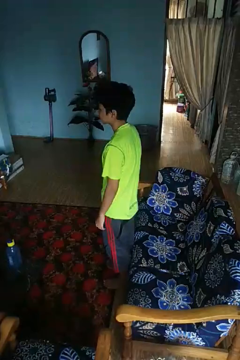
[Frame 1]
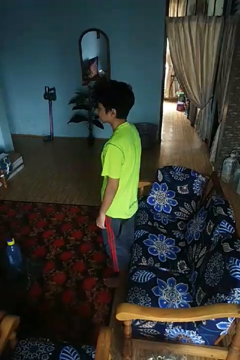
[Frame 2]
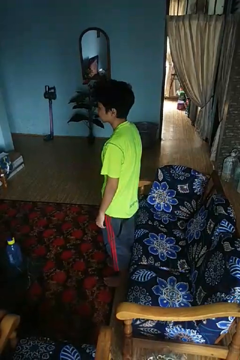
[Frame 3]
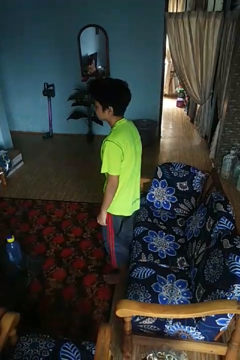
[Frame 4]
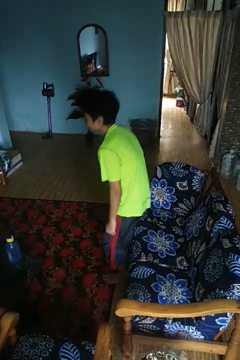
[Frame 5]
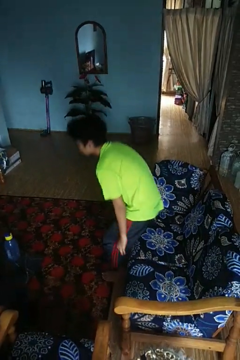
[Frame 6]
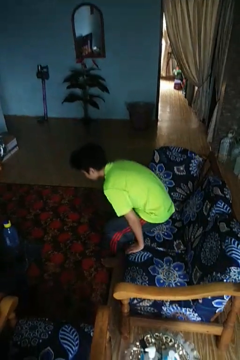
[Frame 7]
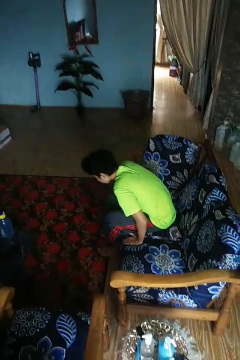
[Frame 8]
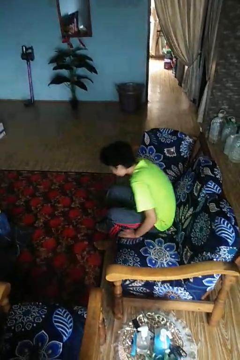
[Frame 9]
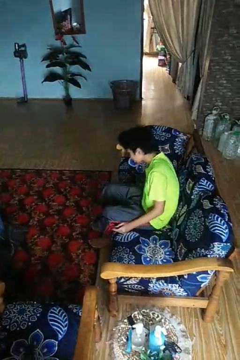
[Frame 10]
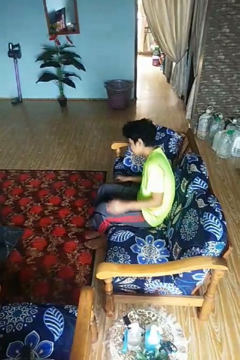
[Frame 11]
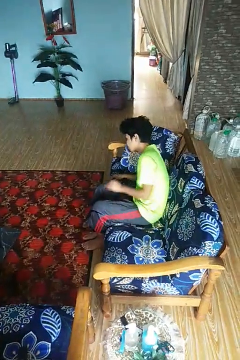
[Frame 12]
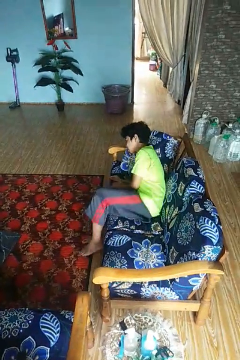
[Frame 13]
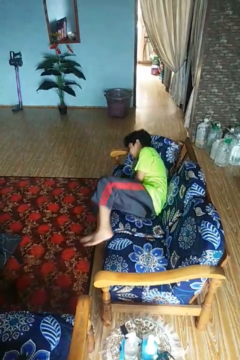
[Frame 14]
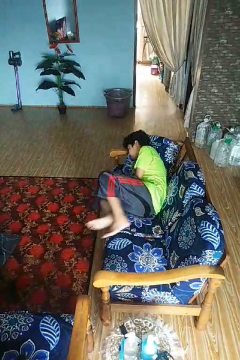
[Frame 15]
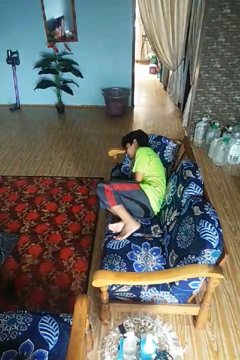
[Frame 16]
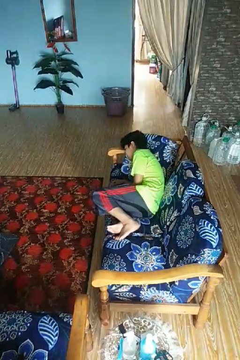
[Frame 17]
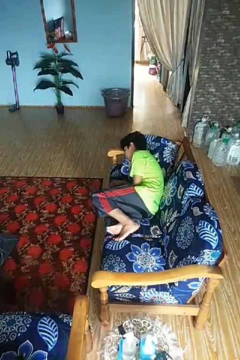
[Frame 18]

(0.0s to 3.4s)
person lies down on couch

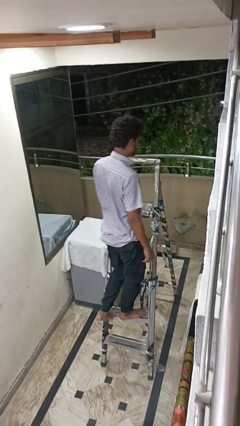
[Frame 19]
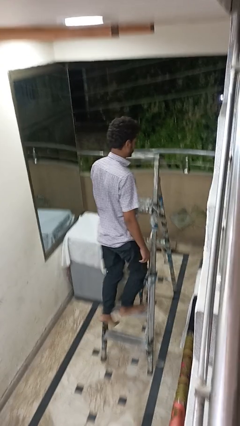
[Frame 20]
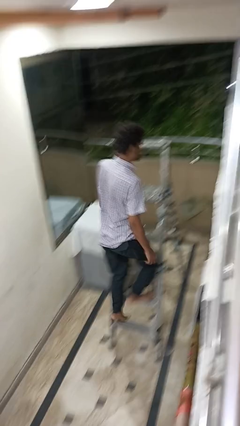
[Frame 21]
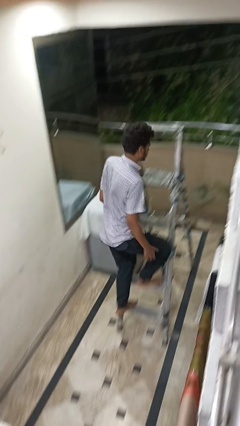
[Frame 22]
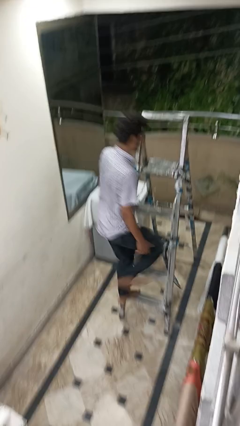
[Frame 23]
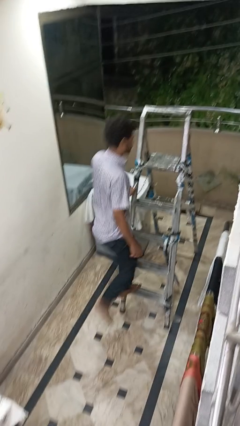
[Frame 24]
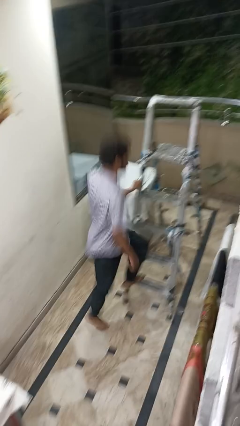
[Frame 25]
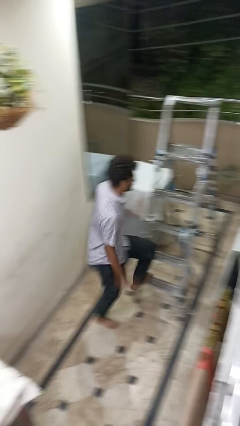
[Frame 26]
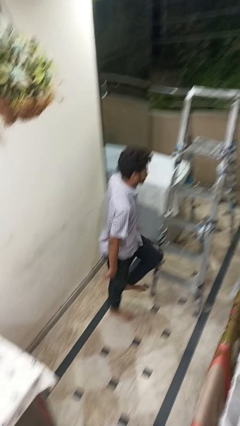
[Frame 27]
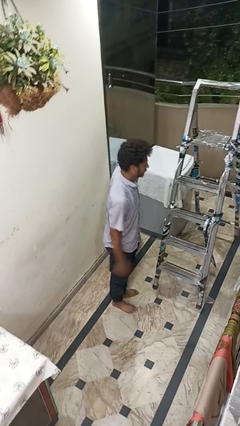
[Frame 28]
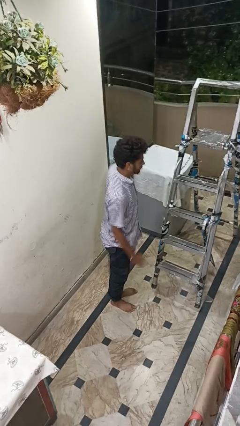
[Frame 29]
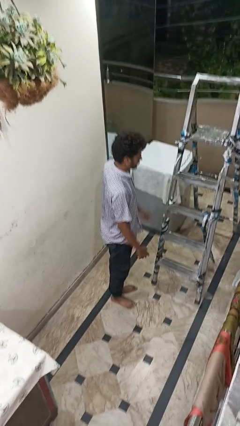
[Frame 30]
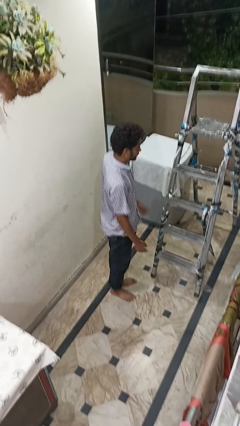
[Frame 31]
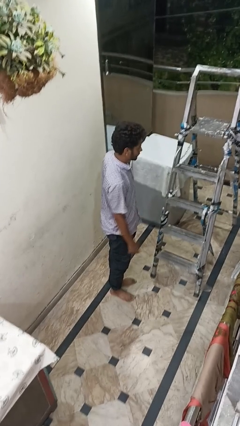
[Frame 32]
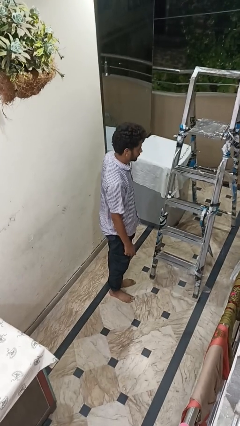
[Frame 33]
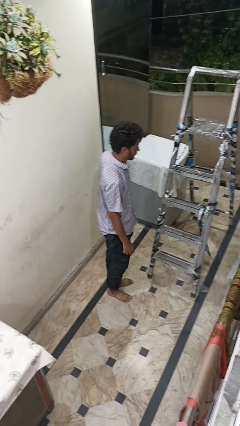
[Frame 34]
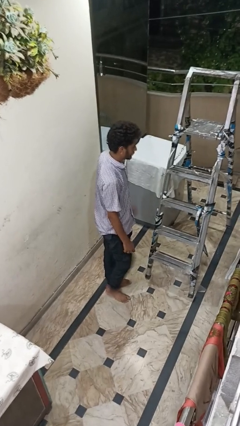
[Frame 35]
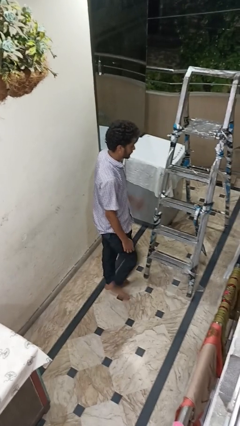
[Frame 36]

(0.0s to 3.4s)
person climbs down ladder

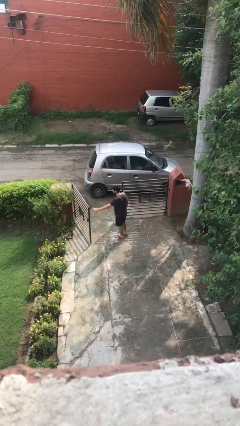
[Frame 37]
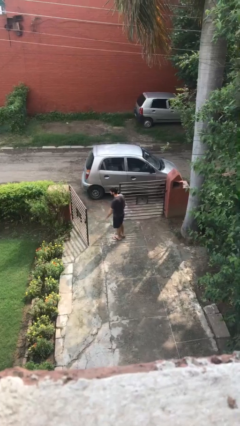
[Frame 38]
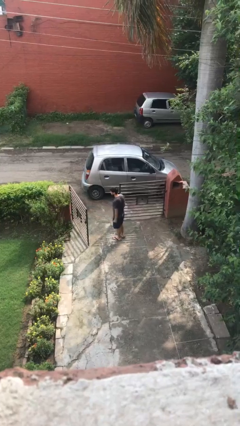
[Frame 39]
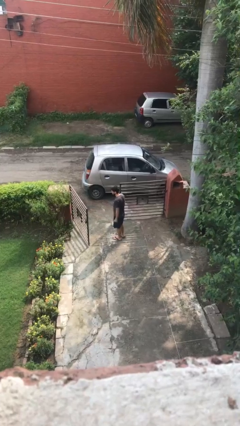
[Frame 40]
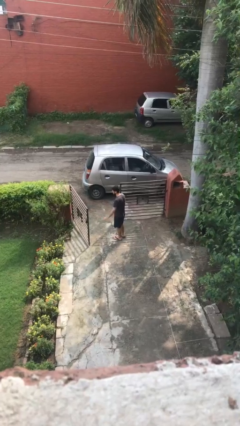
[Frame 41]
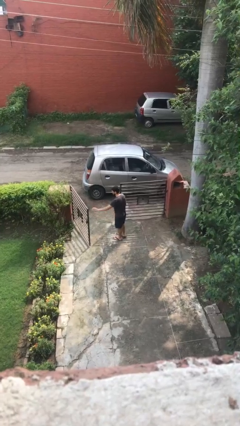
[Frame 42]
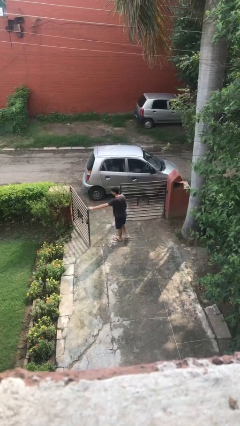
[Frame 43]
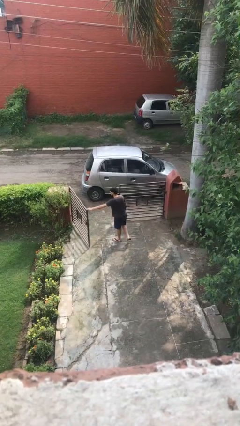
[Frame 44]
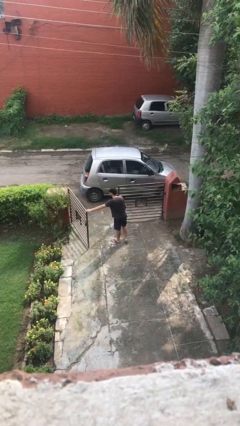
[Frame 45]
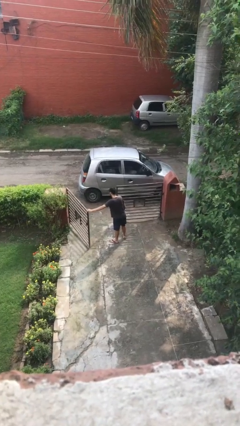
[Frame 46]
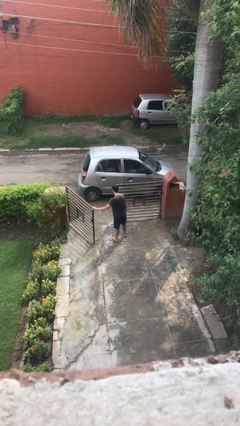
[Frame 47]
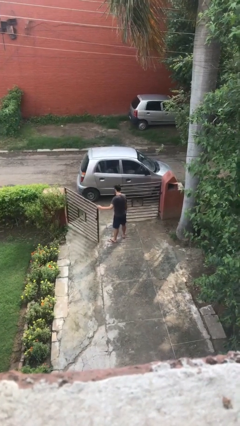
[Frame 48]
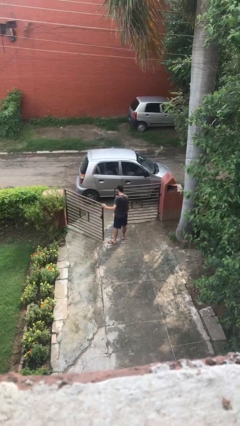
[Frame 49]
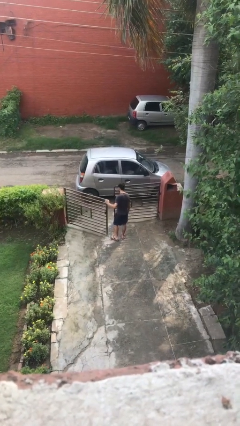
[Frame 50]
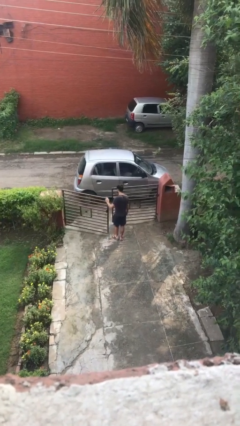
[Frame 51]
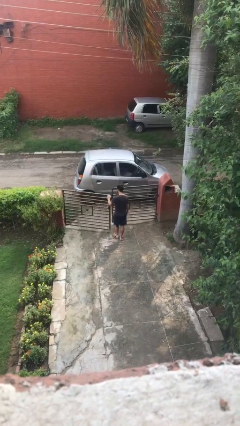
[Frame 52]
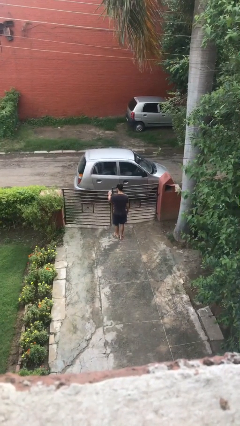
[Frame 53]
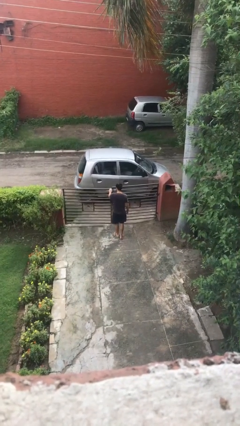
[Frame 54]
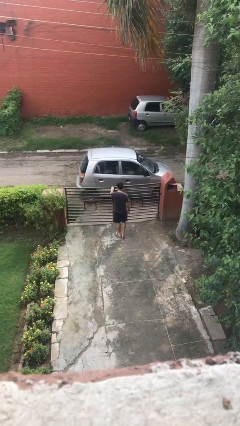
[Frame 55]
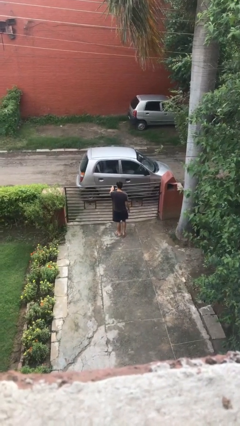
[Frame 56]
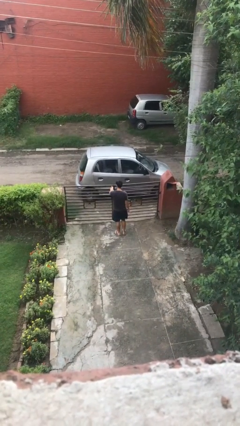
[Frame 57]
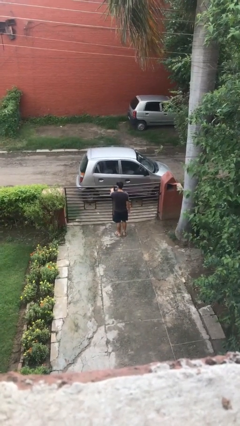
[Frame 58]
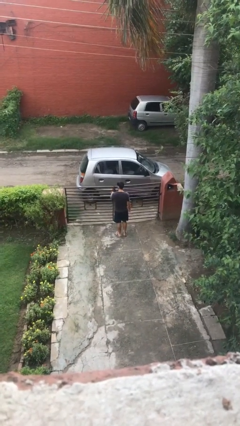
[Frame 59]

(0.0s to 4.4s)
person closes gate

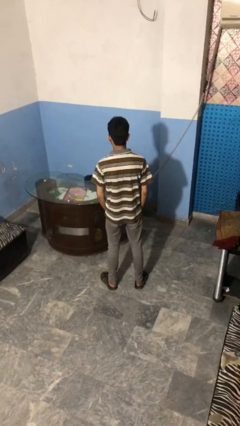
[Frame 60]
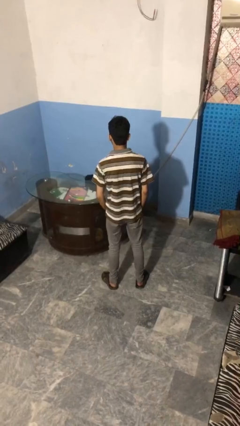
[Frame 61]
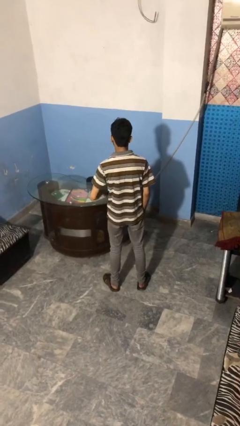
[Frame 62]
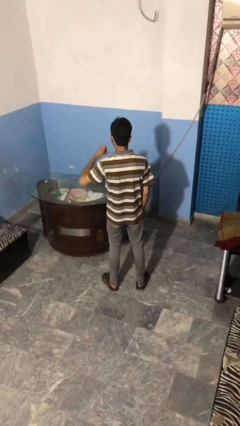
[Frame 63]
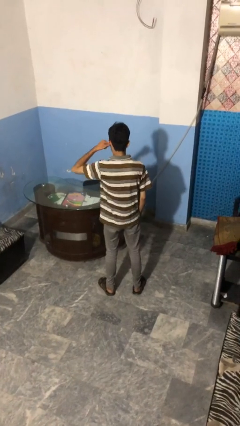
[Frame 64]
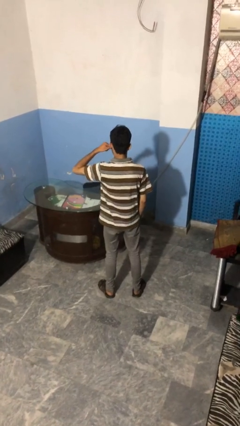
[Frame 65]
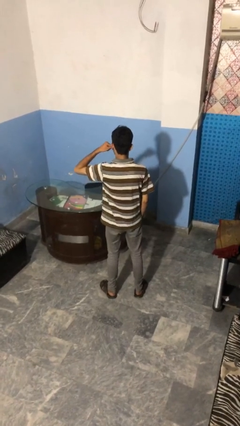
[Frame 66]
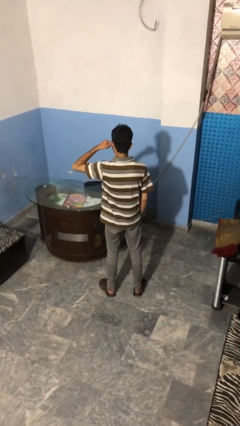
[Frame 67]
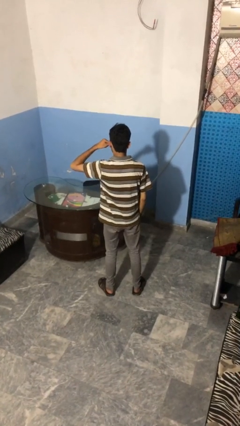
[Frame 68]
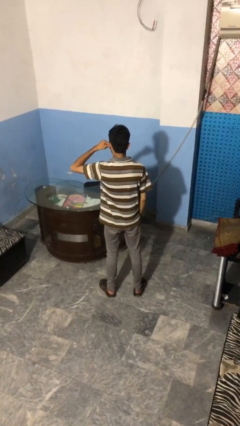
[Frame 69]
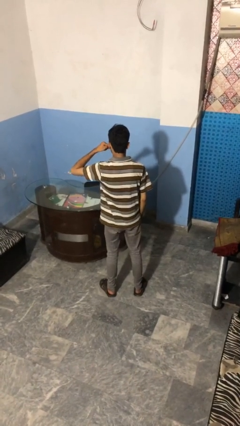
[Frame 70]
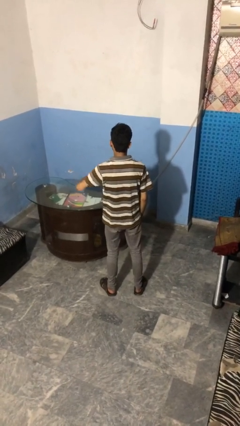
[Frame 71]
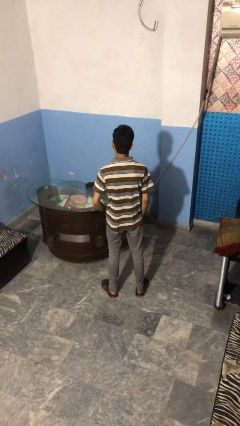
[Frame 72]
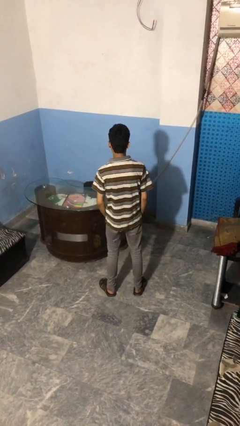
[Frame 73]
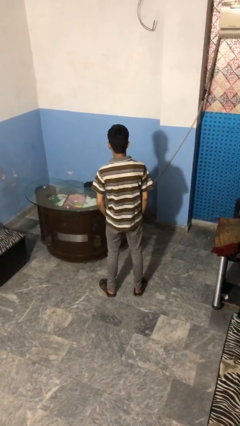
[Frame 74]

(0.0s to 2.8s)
person gestures call me

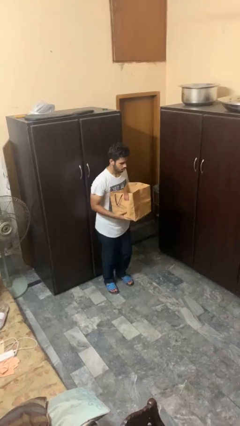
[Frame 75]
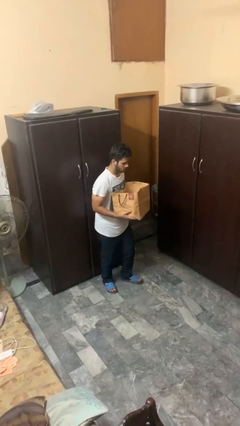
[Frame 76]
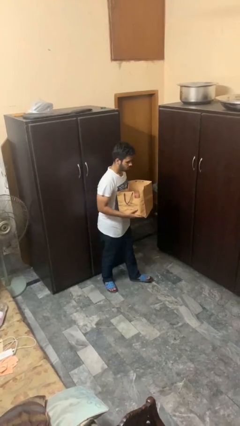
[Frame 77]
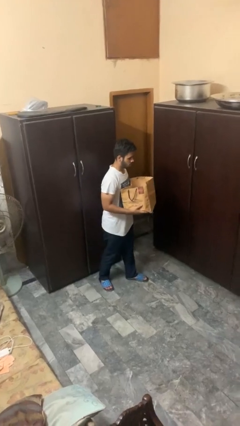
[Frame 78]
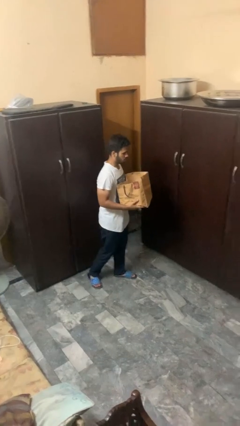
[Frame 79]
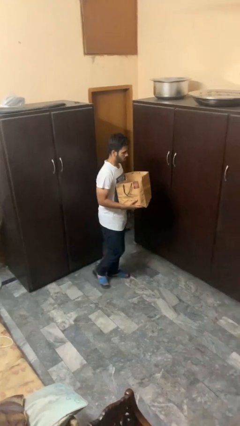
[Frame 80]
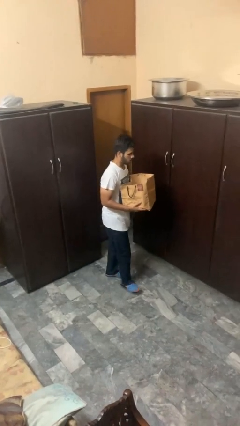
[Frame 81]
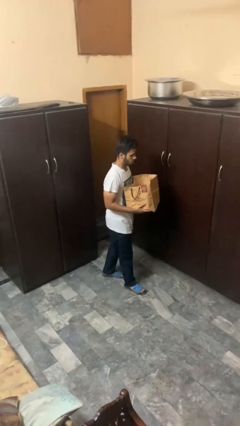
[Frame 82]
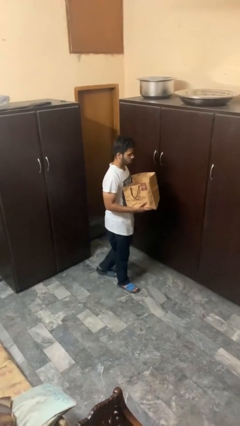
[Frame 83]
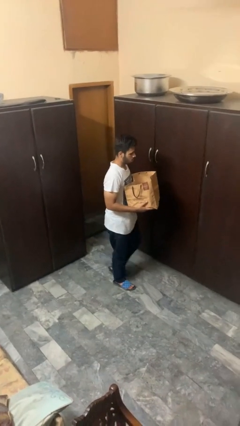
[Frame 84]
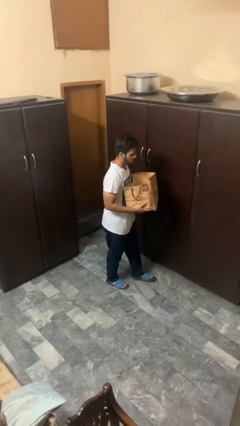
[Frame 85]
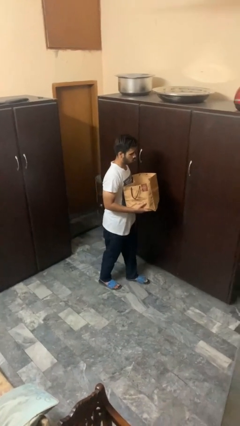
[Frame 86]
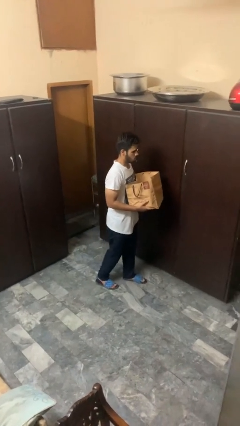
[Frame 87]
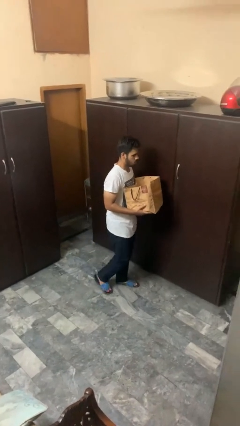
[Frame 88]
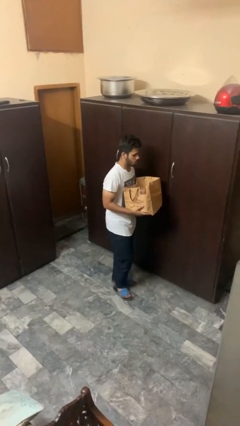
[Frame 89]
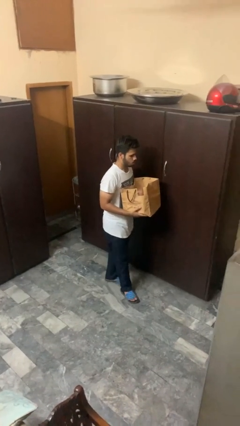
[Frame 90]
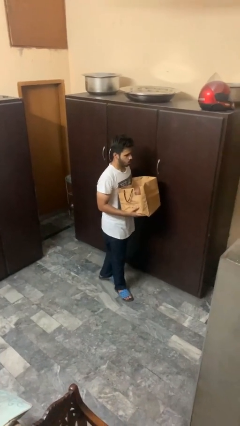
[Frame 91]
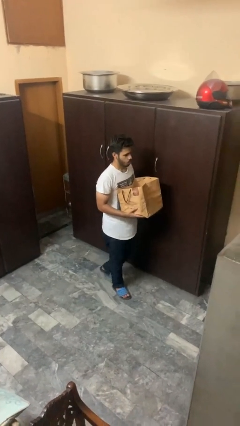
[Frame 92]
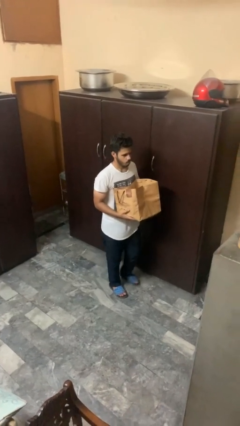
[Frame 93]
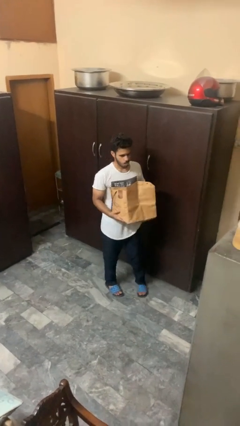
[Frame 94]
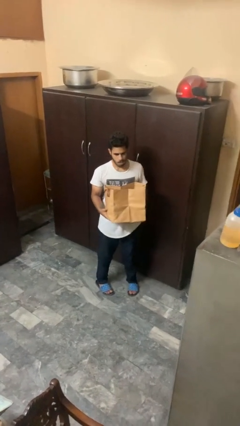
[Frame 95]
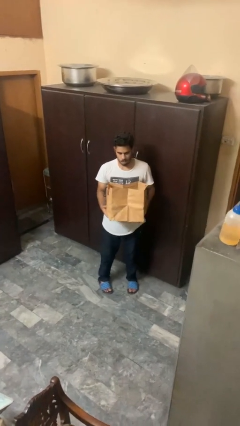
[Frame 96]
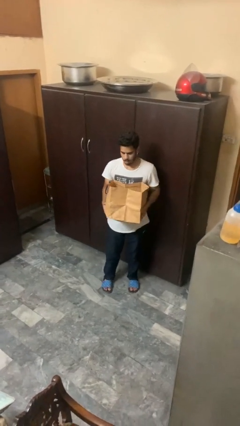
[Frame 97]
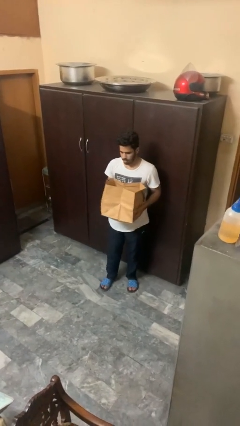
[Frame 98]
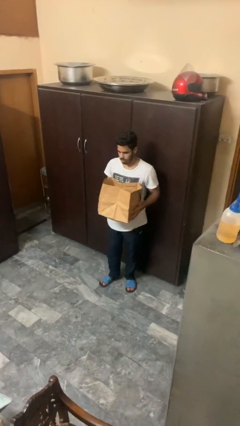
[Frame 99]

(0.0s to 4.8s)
person carries groceries
